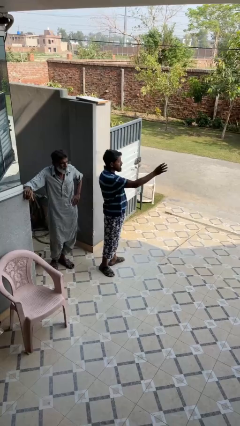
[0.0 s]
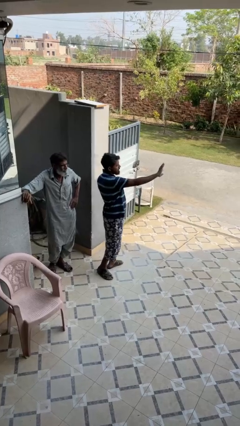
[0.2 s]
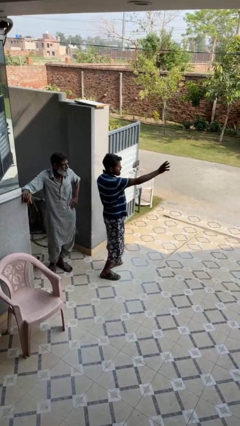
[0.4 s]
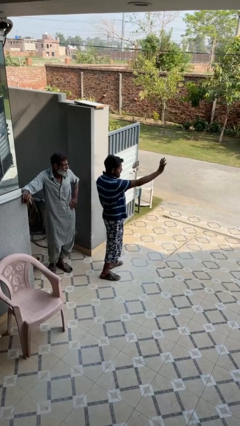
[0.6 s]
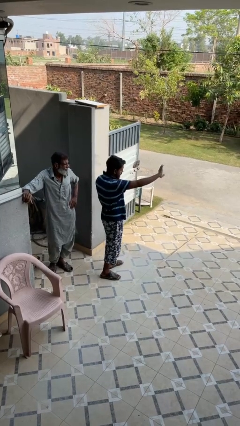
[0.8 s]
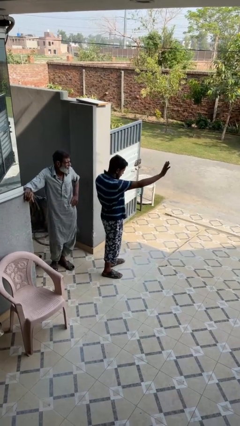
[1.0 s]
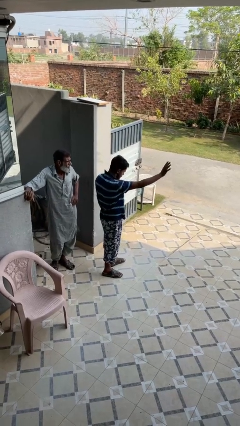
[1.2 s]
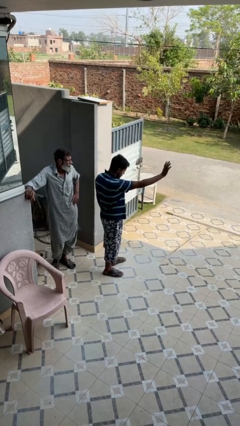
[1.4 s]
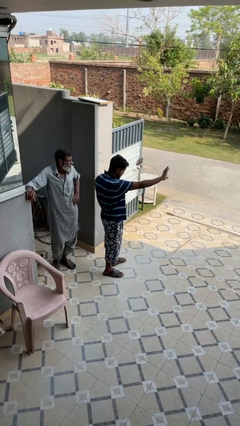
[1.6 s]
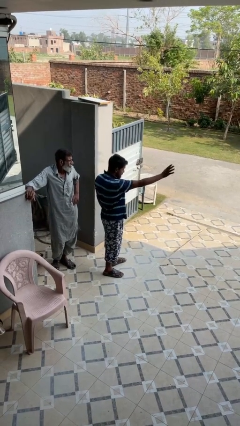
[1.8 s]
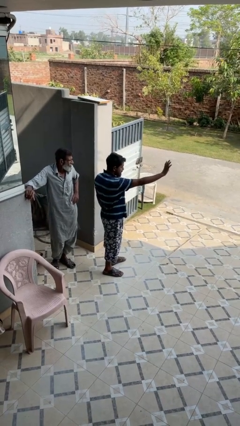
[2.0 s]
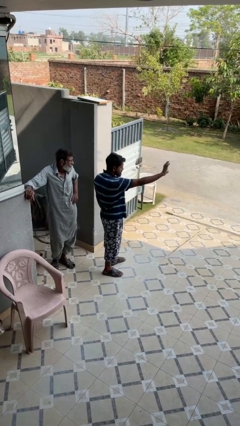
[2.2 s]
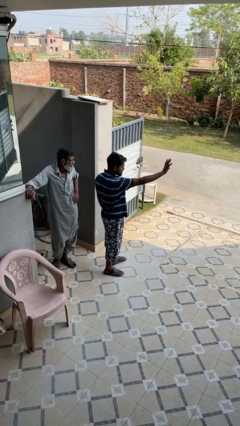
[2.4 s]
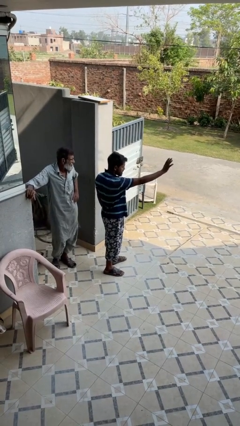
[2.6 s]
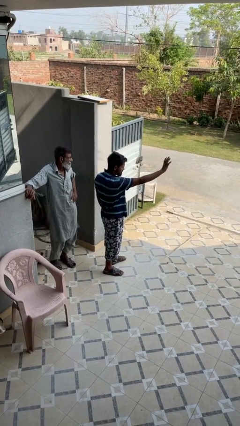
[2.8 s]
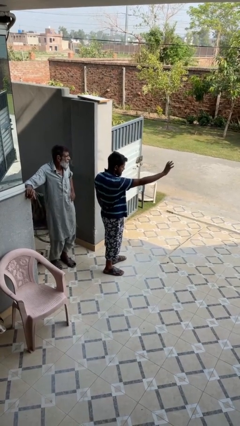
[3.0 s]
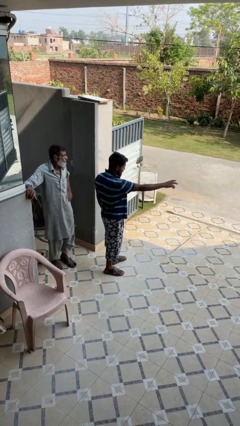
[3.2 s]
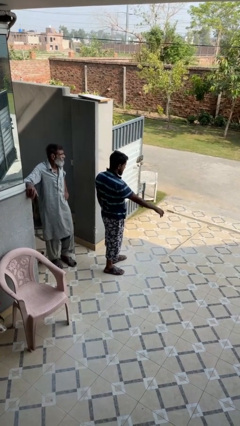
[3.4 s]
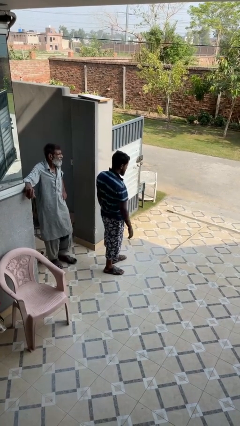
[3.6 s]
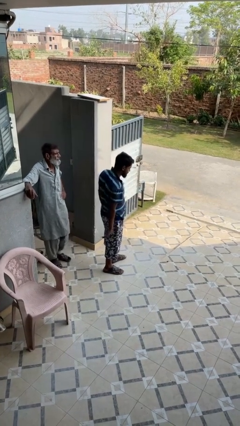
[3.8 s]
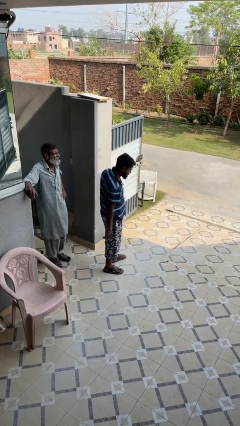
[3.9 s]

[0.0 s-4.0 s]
person waves at person

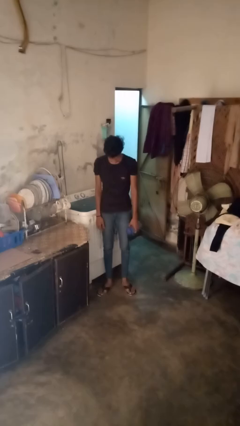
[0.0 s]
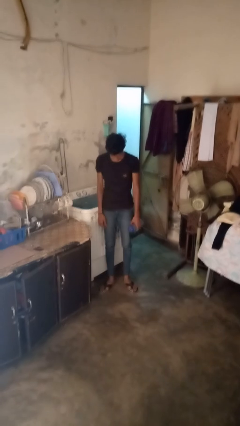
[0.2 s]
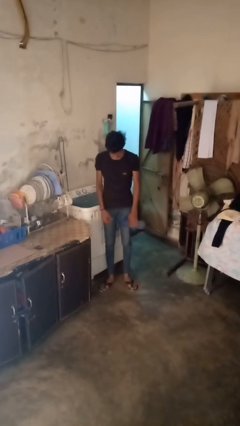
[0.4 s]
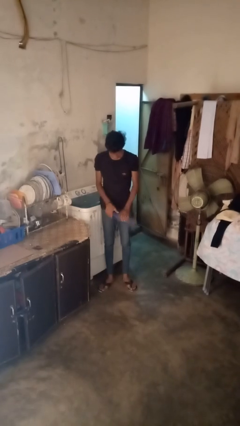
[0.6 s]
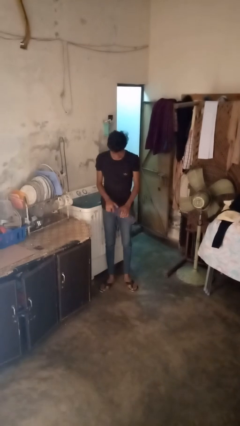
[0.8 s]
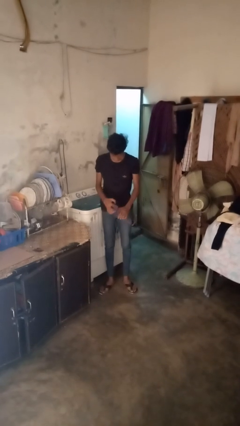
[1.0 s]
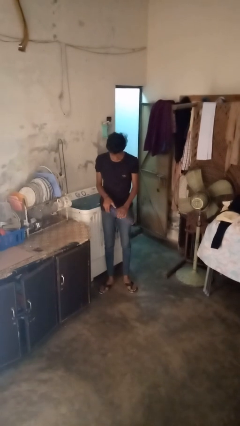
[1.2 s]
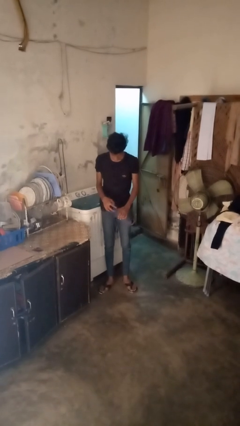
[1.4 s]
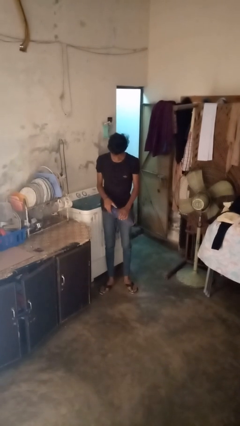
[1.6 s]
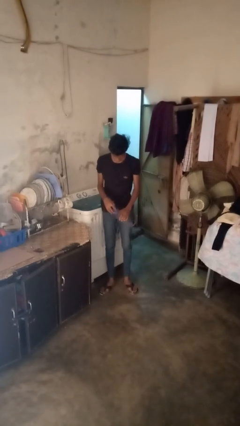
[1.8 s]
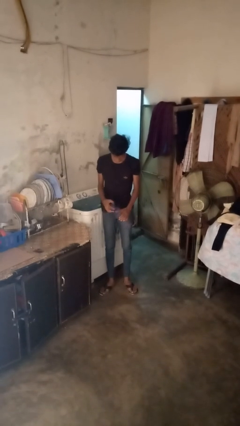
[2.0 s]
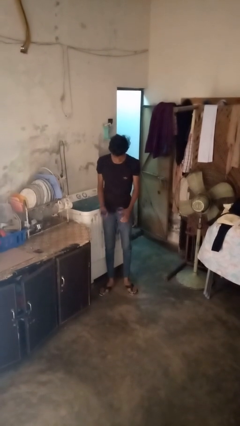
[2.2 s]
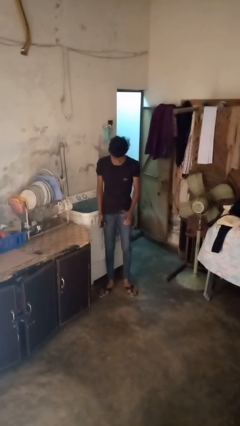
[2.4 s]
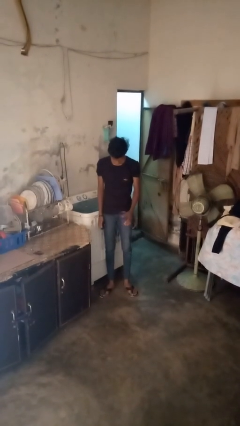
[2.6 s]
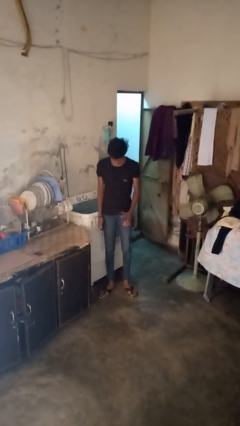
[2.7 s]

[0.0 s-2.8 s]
person unscrews lid from bottle

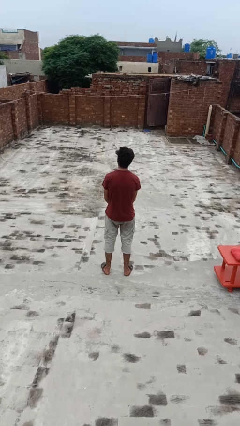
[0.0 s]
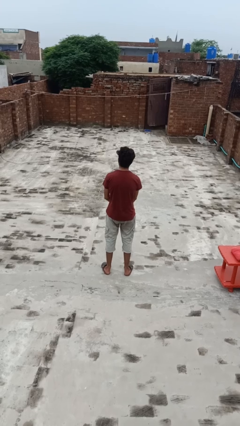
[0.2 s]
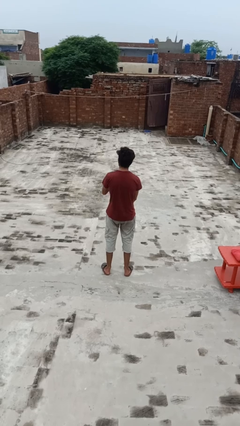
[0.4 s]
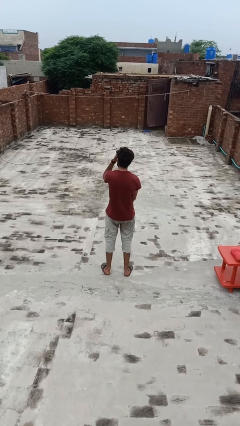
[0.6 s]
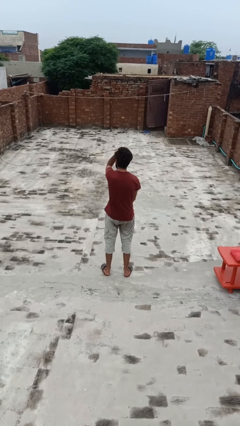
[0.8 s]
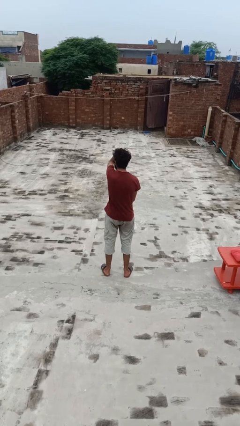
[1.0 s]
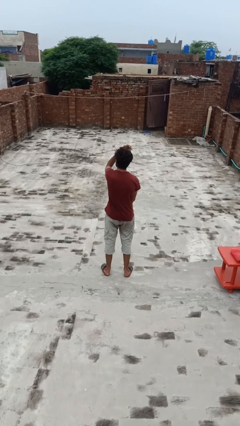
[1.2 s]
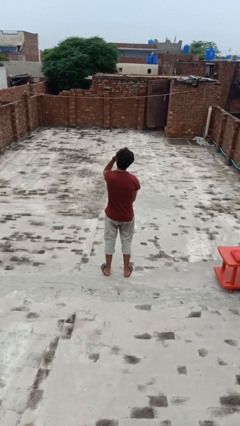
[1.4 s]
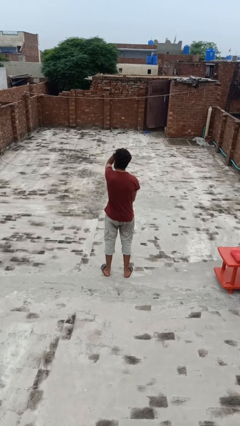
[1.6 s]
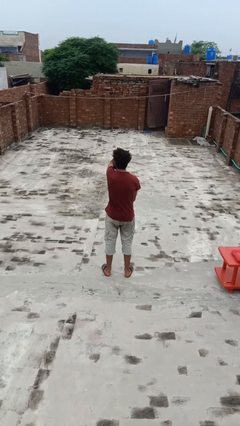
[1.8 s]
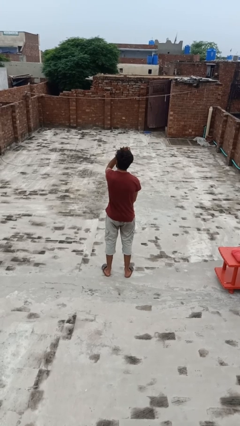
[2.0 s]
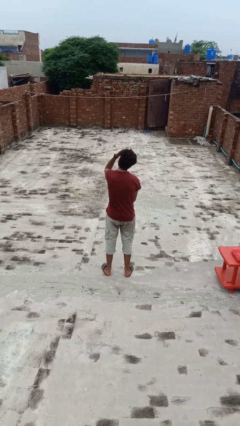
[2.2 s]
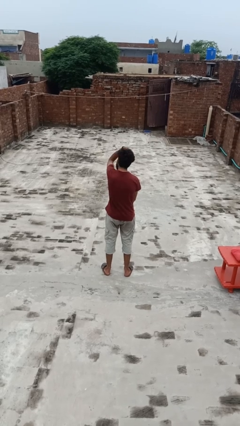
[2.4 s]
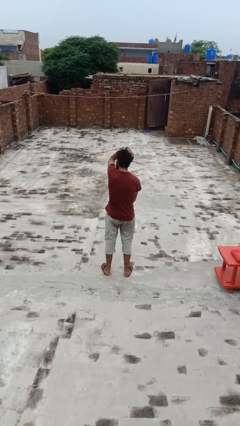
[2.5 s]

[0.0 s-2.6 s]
person strokes hair

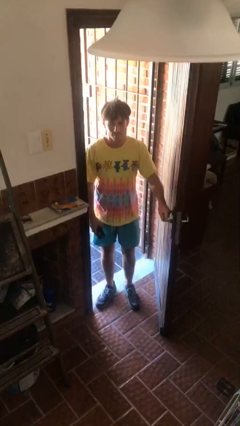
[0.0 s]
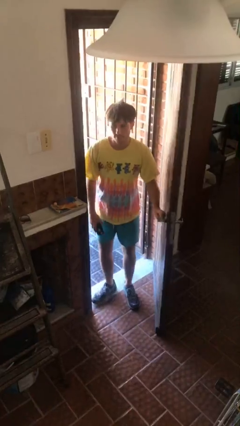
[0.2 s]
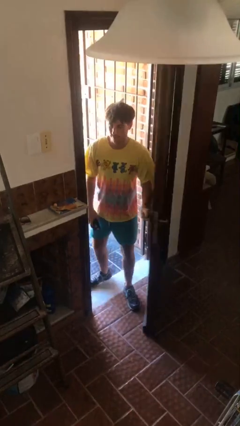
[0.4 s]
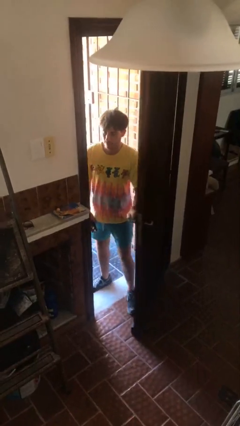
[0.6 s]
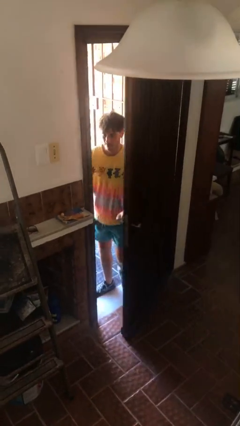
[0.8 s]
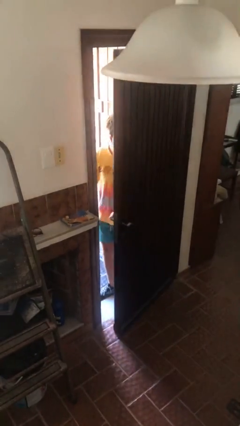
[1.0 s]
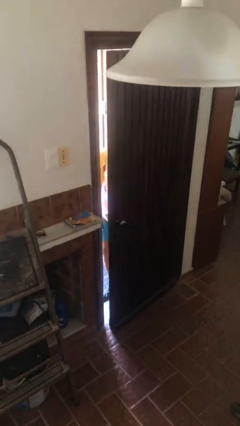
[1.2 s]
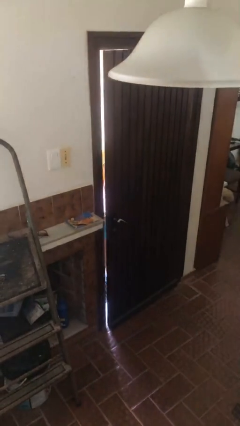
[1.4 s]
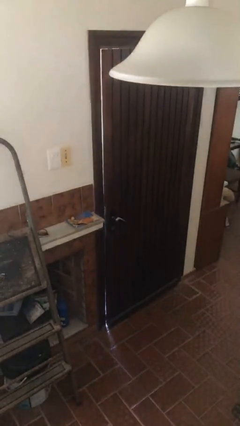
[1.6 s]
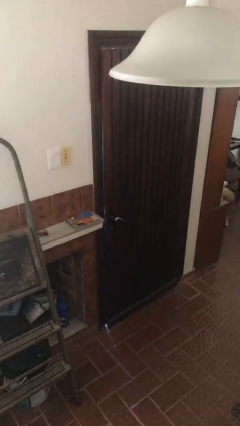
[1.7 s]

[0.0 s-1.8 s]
person closes facility door

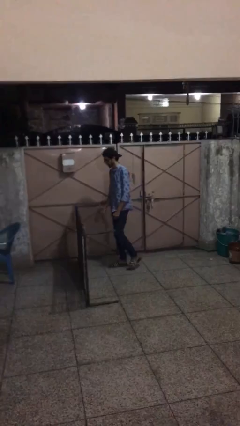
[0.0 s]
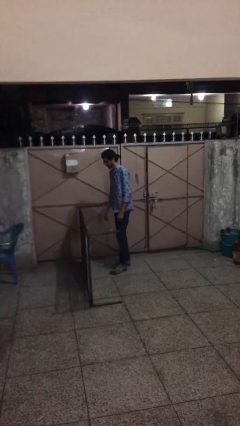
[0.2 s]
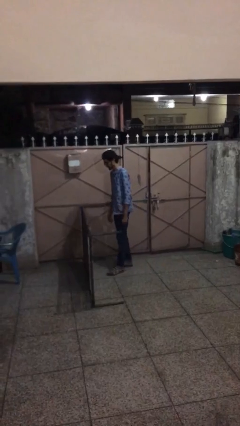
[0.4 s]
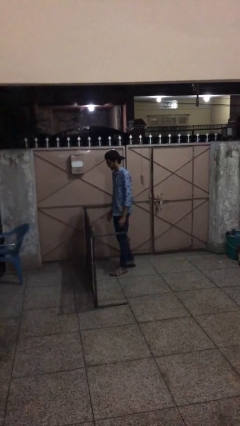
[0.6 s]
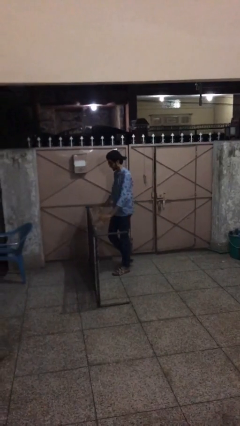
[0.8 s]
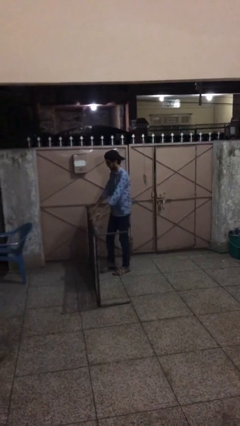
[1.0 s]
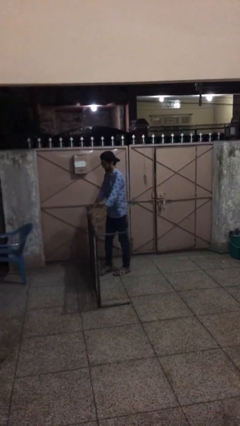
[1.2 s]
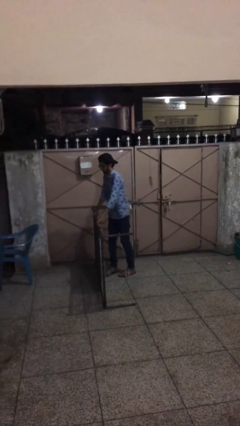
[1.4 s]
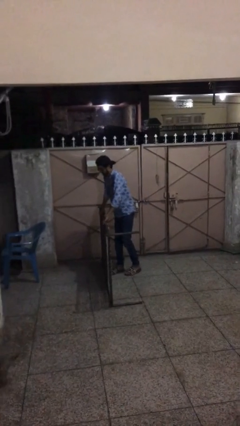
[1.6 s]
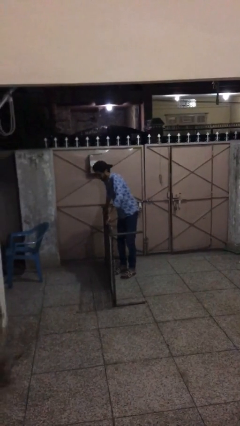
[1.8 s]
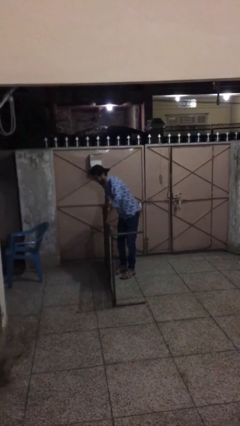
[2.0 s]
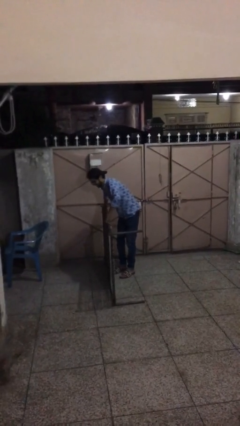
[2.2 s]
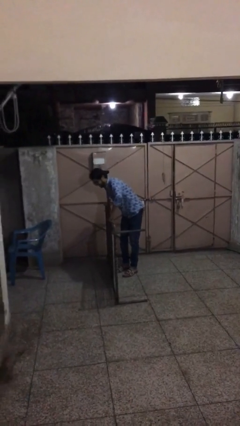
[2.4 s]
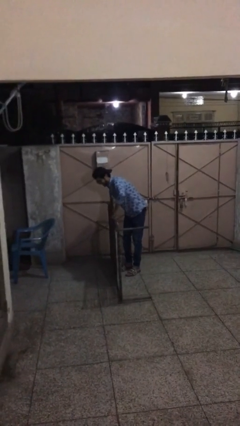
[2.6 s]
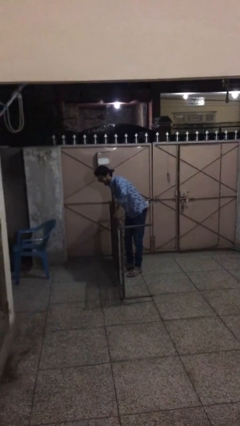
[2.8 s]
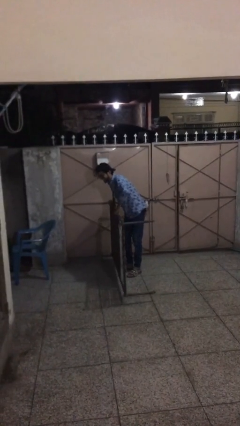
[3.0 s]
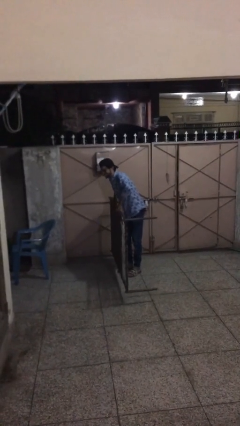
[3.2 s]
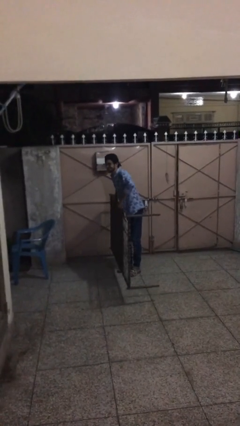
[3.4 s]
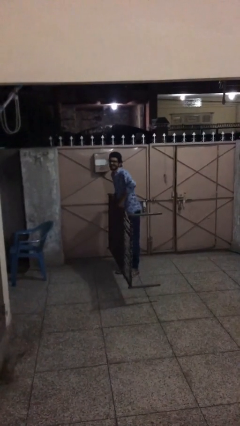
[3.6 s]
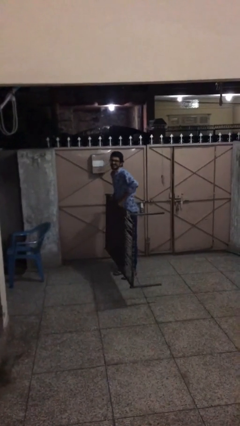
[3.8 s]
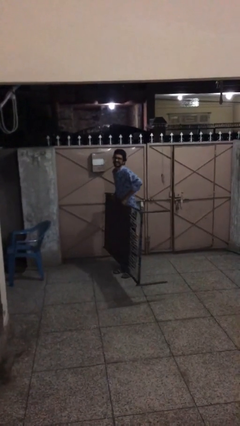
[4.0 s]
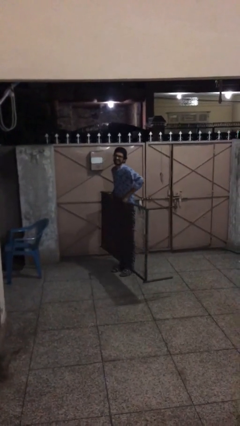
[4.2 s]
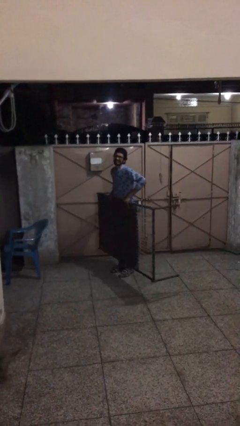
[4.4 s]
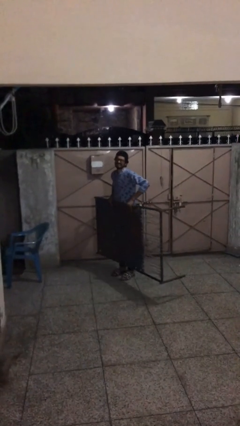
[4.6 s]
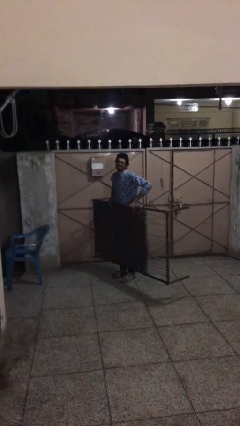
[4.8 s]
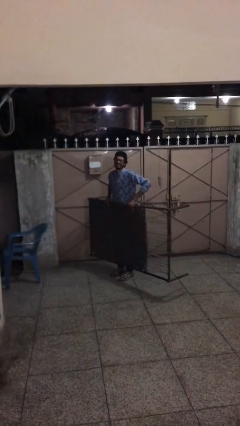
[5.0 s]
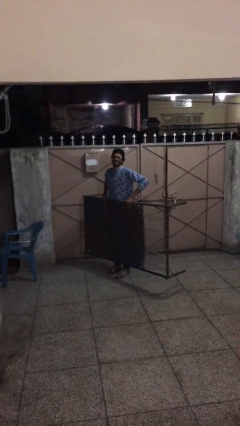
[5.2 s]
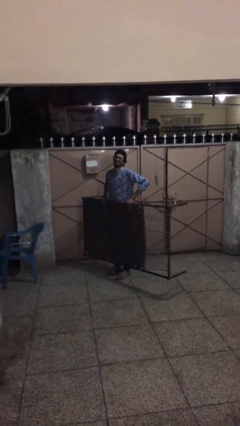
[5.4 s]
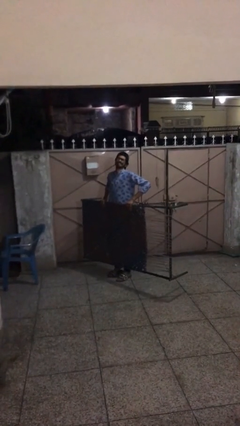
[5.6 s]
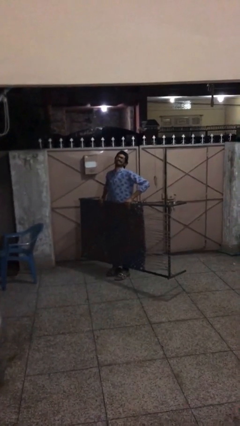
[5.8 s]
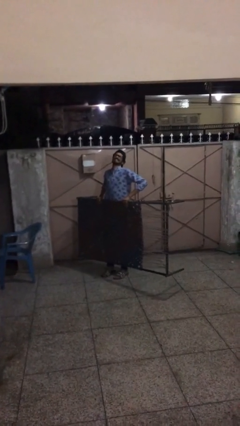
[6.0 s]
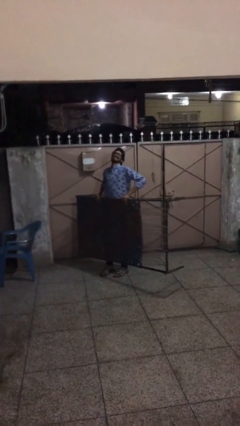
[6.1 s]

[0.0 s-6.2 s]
person picks up object from floor

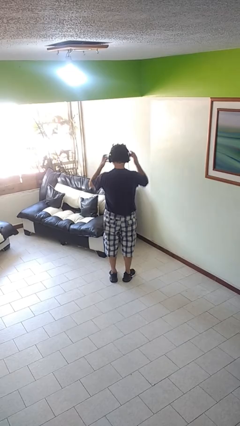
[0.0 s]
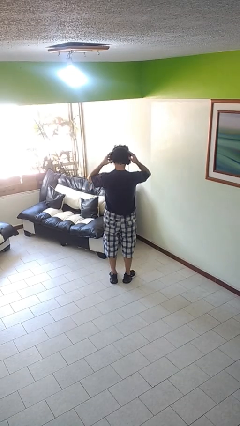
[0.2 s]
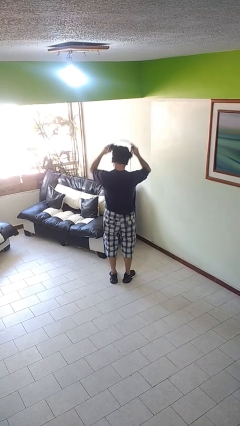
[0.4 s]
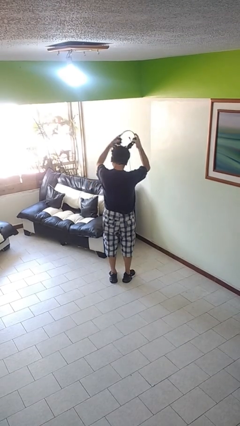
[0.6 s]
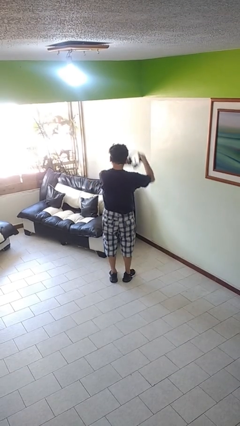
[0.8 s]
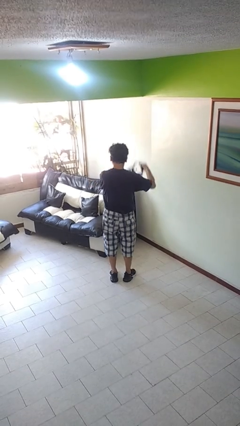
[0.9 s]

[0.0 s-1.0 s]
person takes off headphones
